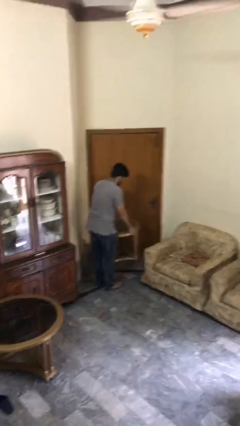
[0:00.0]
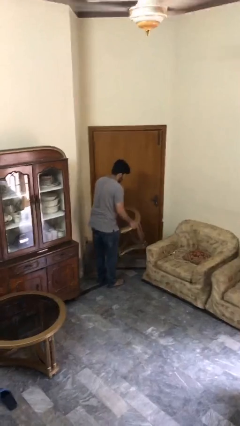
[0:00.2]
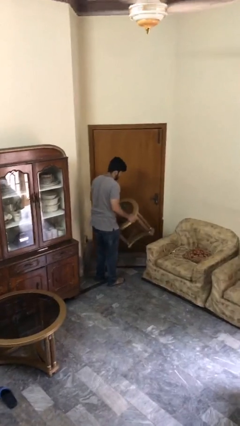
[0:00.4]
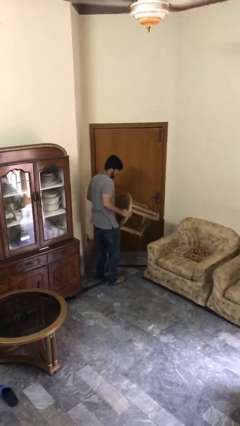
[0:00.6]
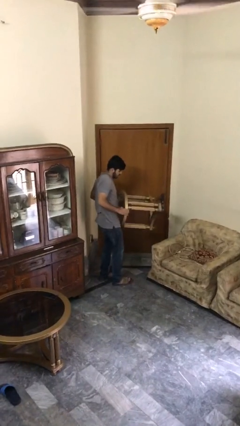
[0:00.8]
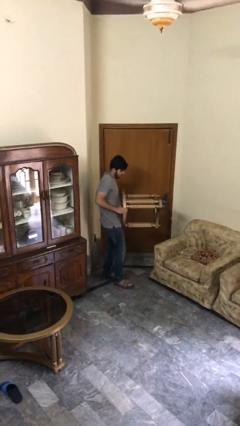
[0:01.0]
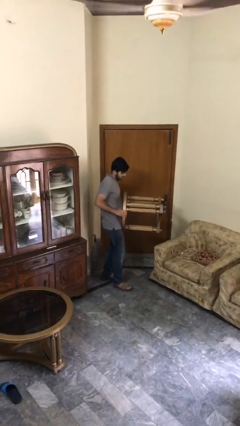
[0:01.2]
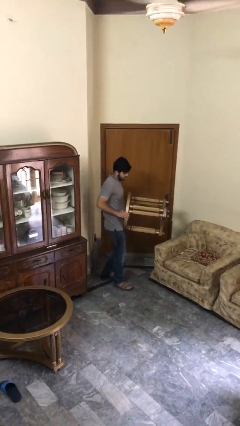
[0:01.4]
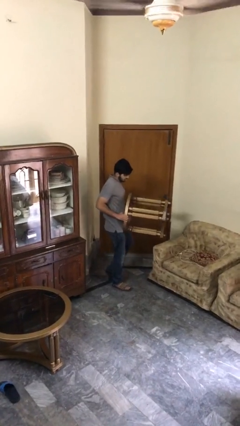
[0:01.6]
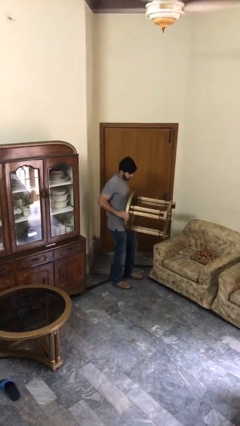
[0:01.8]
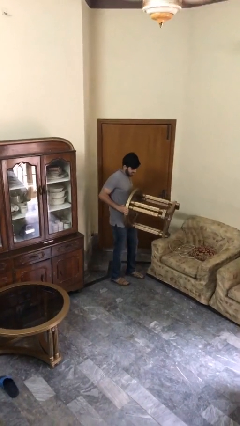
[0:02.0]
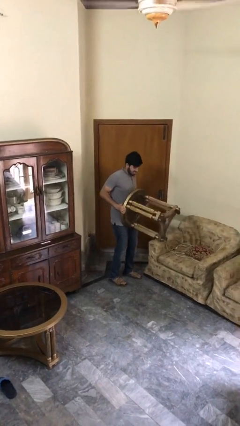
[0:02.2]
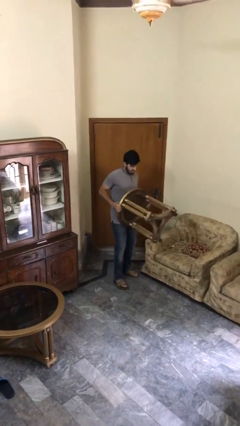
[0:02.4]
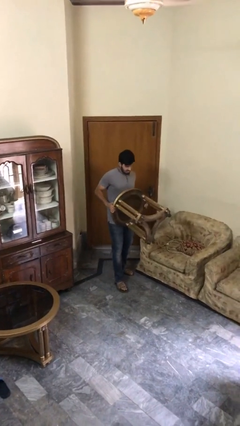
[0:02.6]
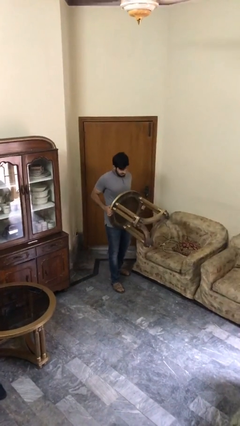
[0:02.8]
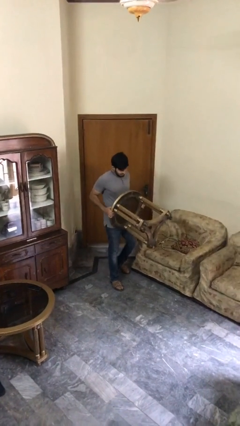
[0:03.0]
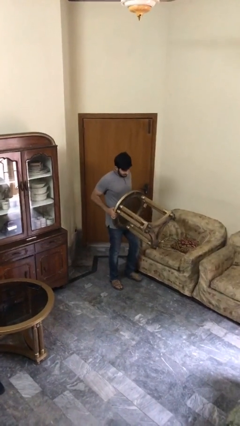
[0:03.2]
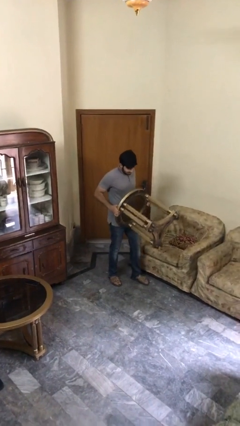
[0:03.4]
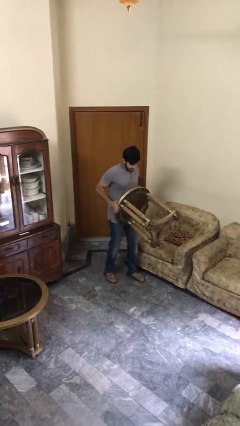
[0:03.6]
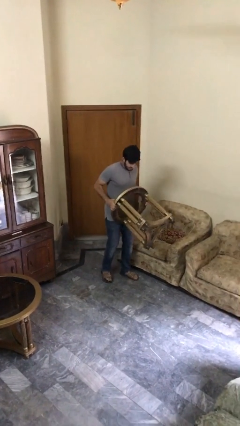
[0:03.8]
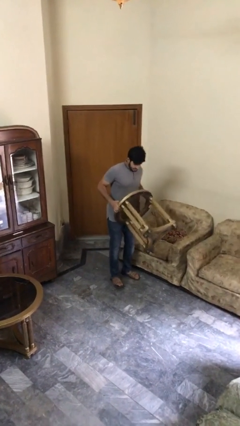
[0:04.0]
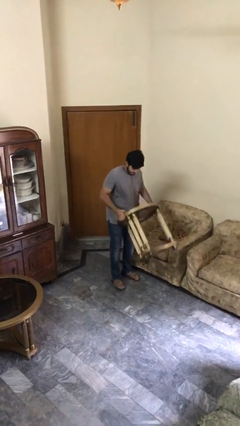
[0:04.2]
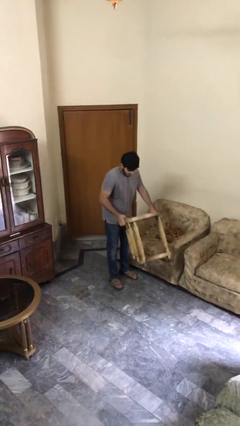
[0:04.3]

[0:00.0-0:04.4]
person carries heavy object

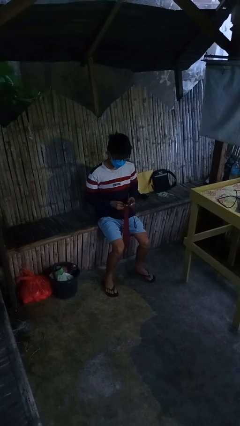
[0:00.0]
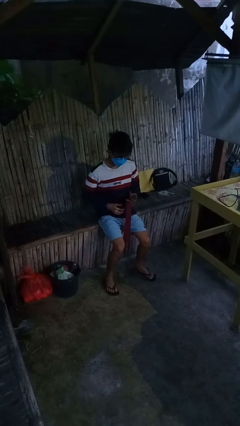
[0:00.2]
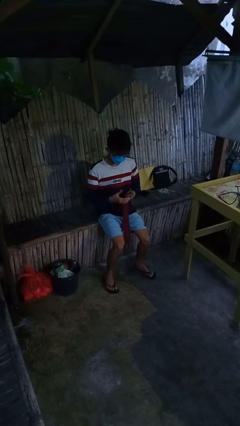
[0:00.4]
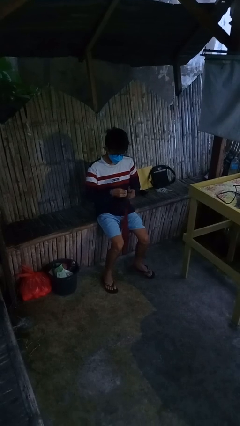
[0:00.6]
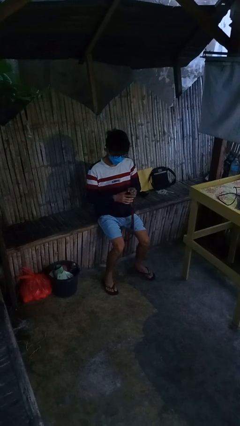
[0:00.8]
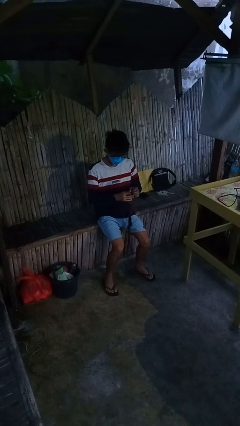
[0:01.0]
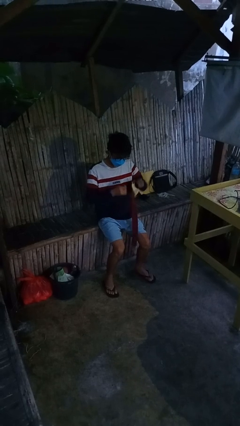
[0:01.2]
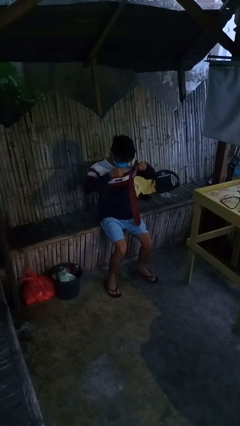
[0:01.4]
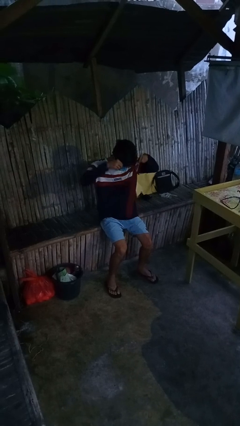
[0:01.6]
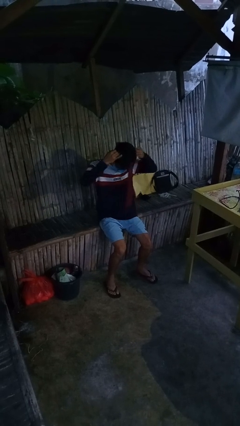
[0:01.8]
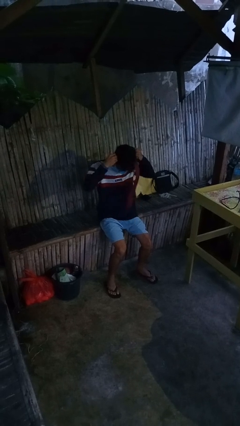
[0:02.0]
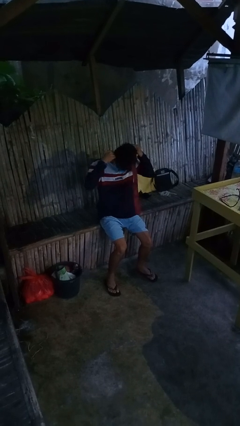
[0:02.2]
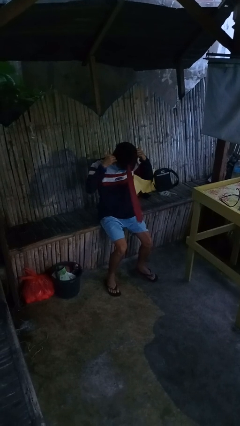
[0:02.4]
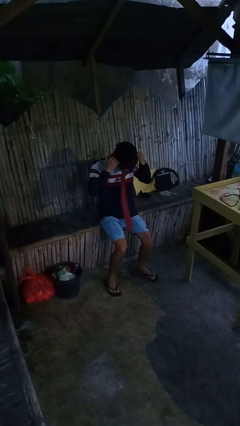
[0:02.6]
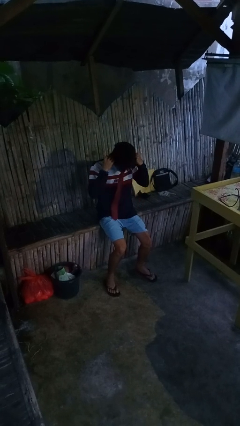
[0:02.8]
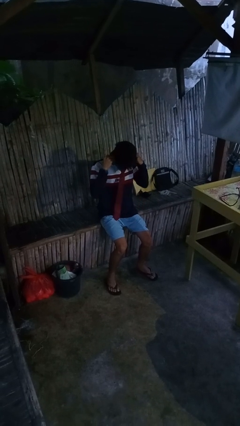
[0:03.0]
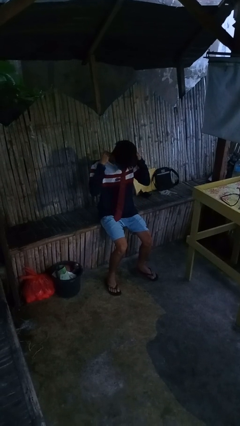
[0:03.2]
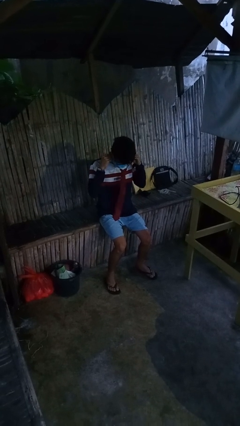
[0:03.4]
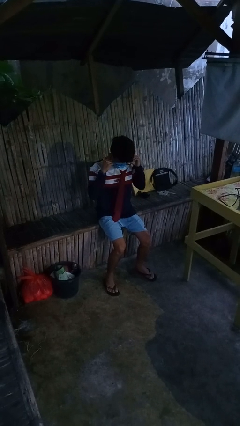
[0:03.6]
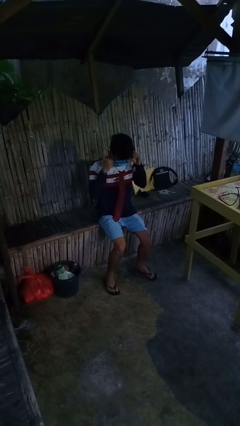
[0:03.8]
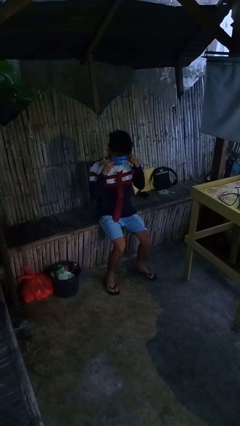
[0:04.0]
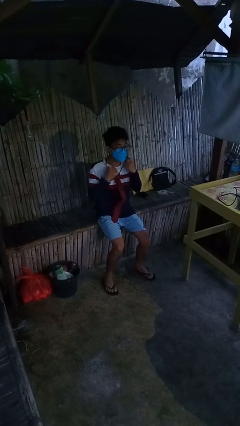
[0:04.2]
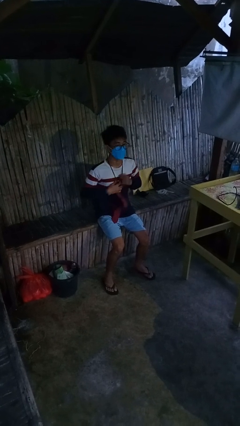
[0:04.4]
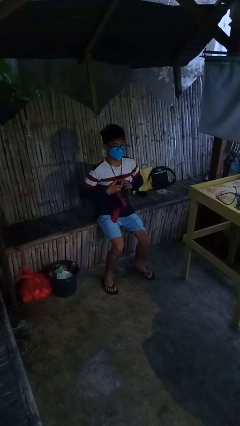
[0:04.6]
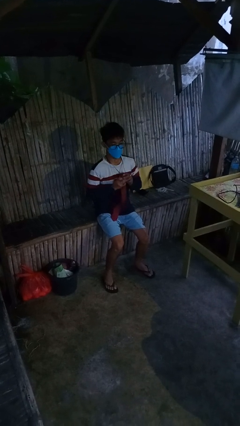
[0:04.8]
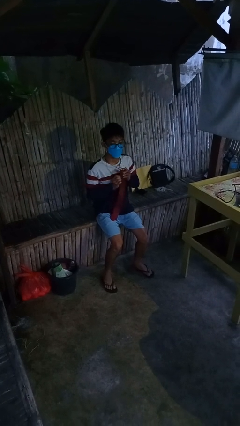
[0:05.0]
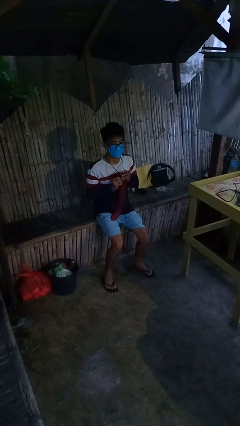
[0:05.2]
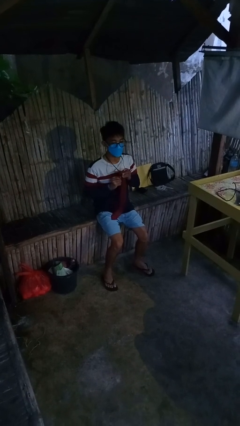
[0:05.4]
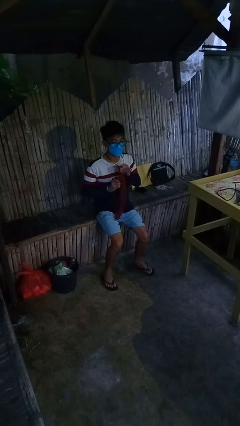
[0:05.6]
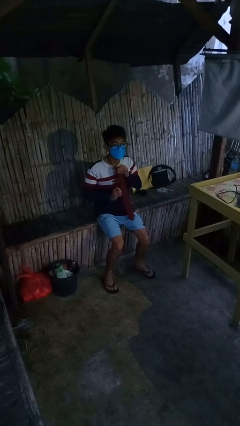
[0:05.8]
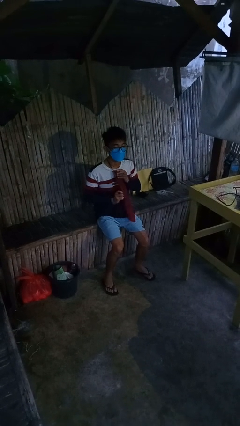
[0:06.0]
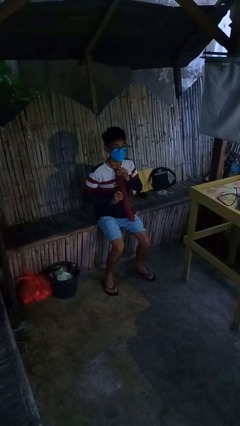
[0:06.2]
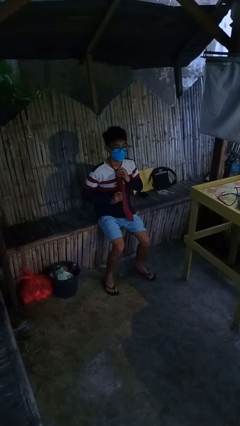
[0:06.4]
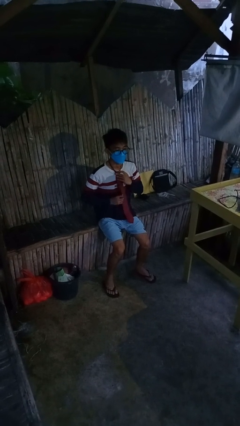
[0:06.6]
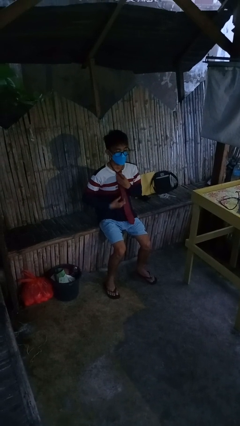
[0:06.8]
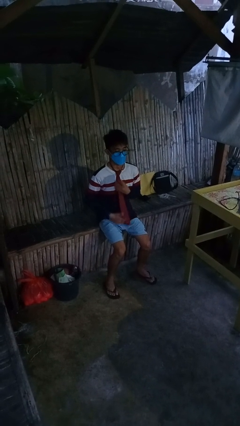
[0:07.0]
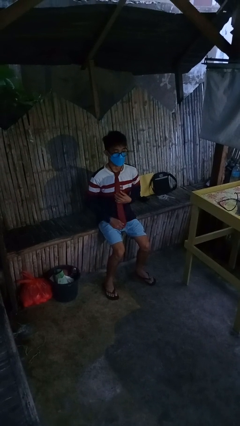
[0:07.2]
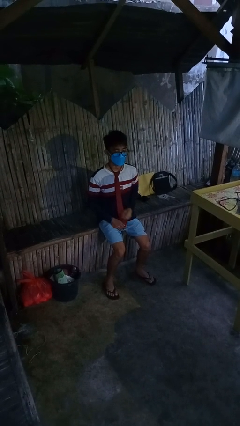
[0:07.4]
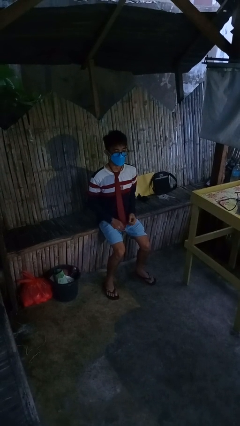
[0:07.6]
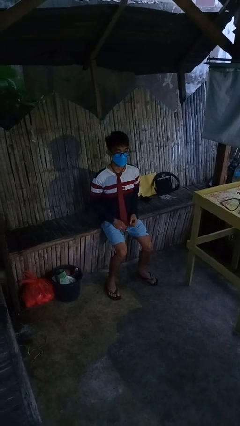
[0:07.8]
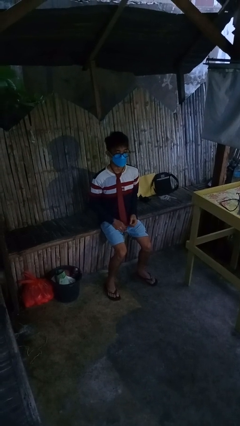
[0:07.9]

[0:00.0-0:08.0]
person puts on necktie

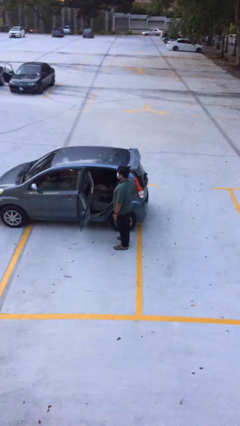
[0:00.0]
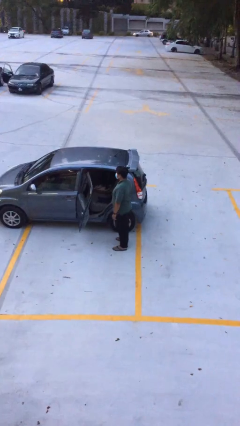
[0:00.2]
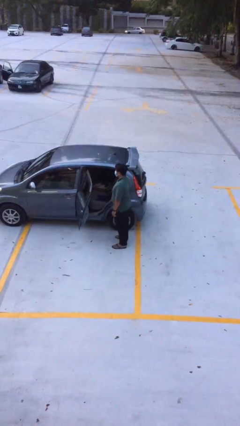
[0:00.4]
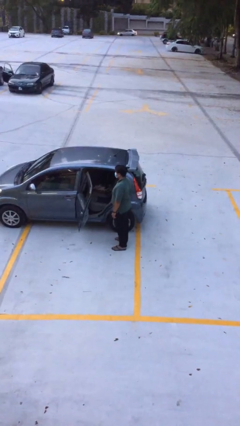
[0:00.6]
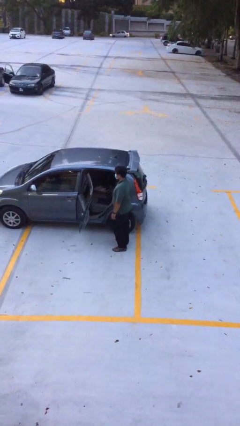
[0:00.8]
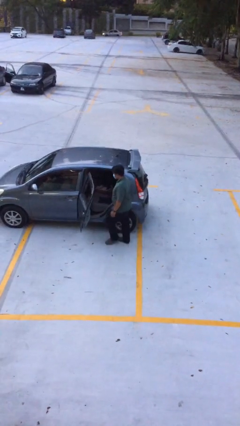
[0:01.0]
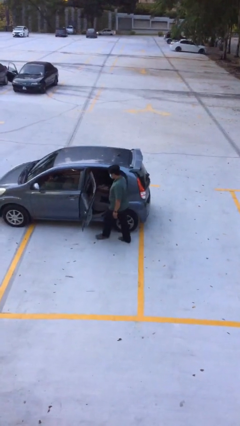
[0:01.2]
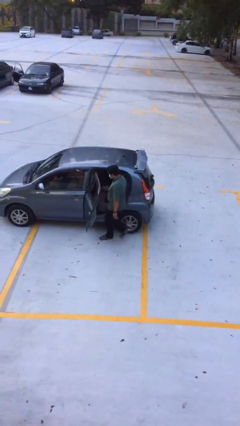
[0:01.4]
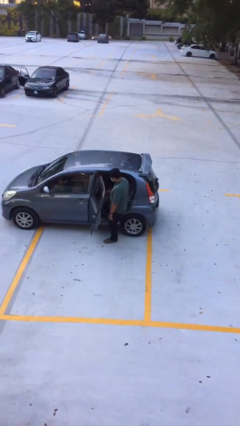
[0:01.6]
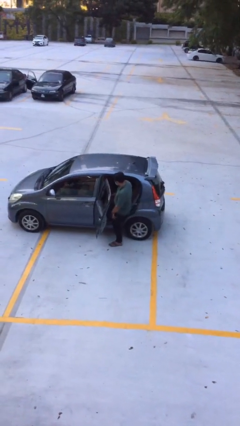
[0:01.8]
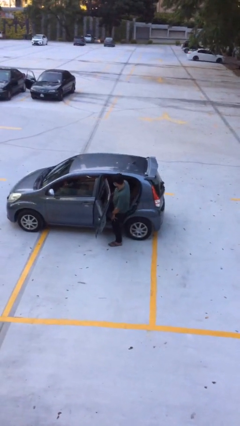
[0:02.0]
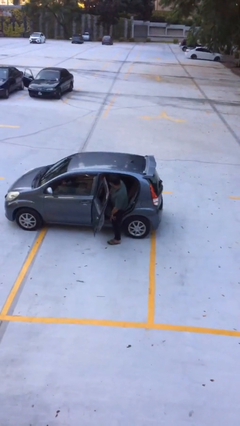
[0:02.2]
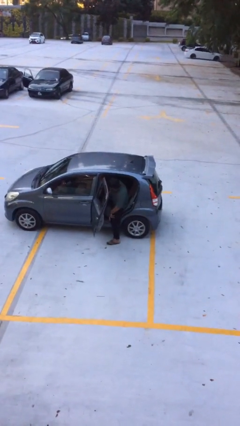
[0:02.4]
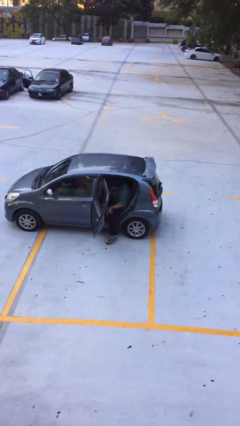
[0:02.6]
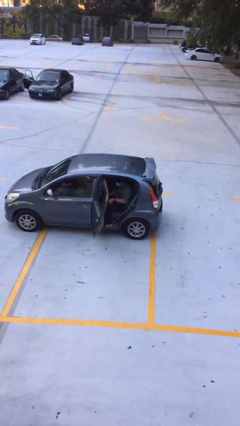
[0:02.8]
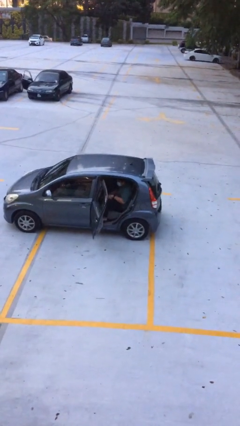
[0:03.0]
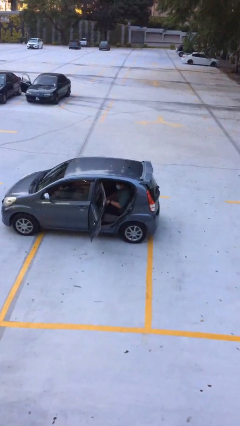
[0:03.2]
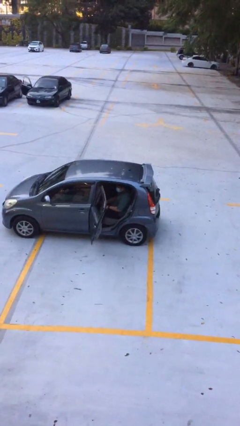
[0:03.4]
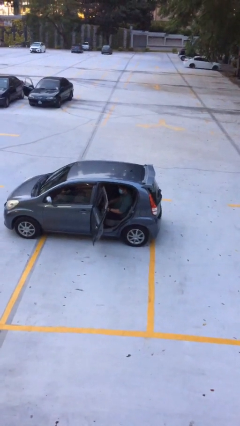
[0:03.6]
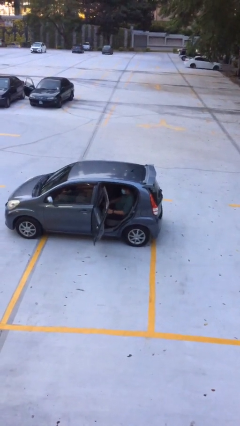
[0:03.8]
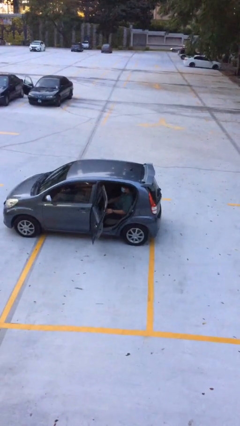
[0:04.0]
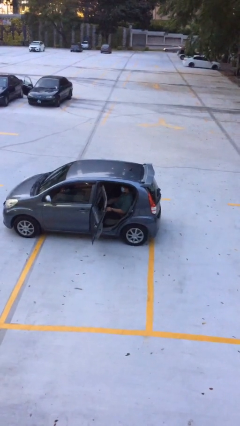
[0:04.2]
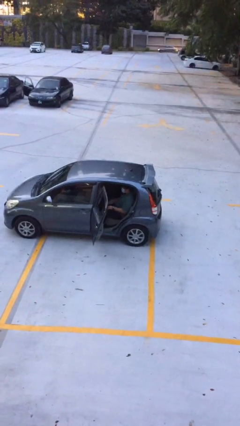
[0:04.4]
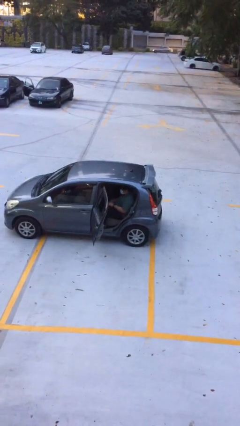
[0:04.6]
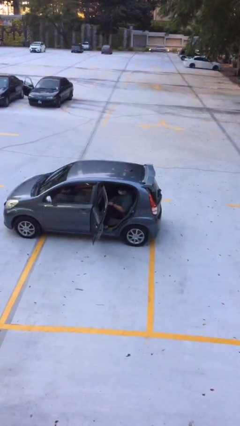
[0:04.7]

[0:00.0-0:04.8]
person enters car

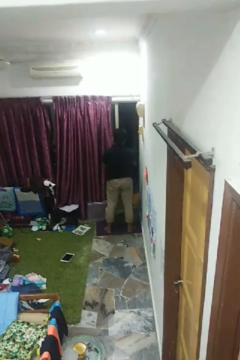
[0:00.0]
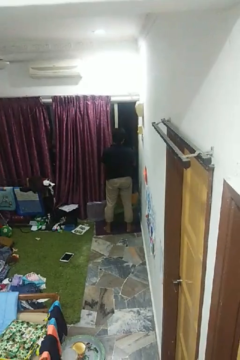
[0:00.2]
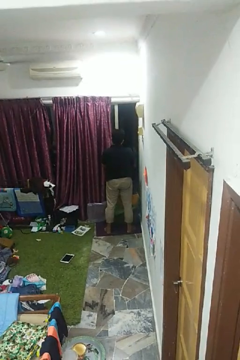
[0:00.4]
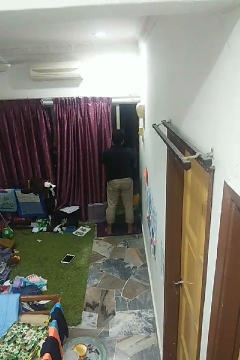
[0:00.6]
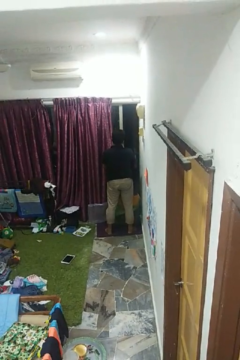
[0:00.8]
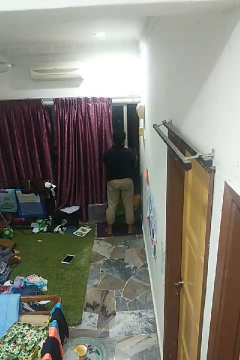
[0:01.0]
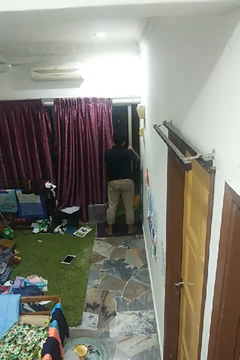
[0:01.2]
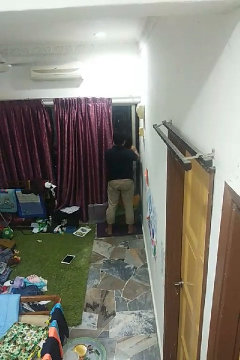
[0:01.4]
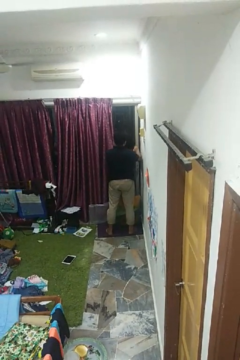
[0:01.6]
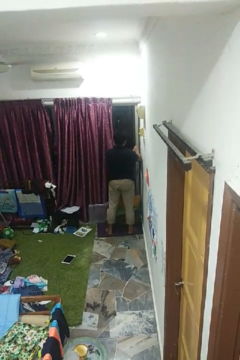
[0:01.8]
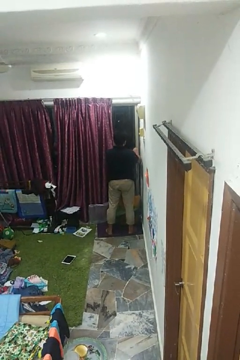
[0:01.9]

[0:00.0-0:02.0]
person closes home window
